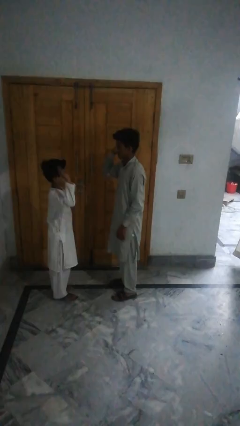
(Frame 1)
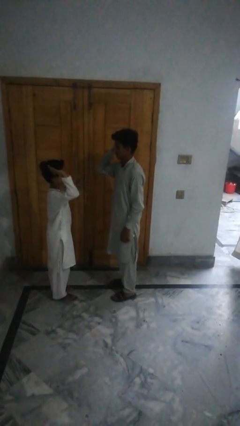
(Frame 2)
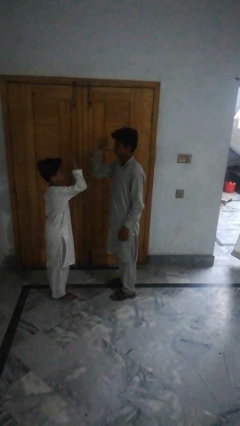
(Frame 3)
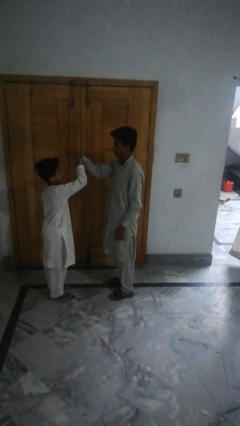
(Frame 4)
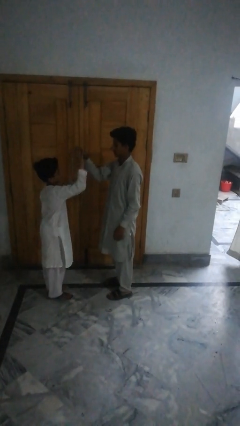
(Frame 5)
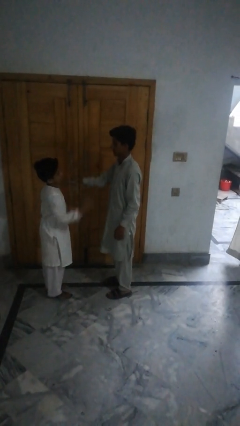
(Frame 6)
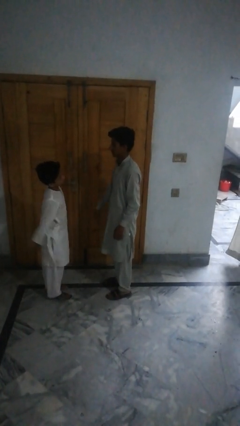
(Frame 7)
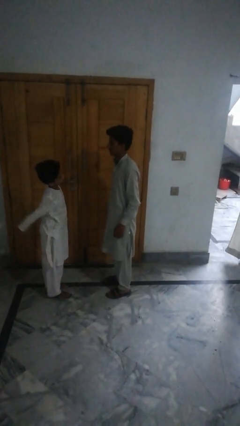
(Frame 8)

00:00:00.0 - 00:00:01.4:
person highfives hand

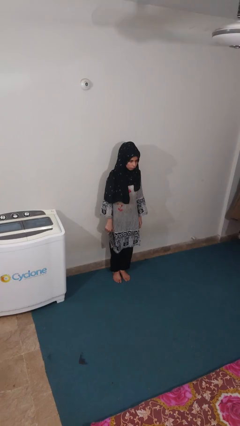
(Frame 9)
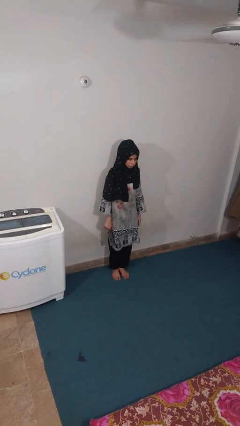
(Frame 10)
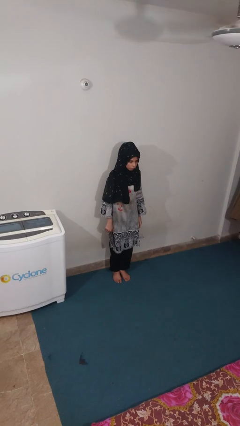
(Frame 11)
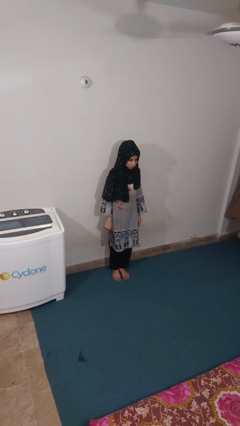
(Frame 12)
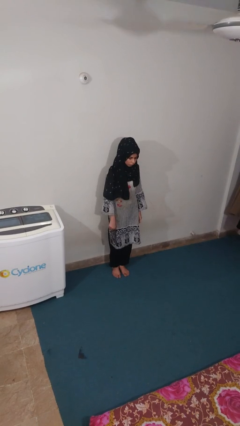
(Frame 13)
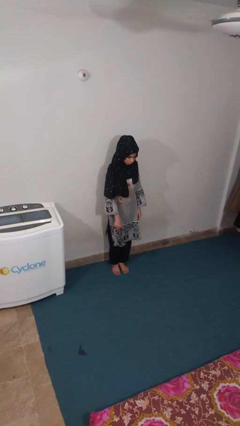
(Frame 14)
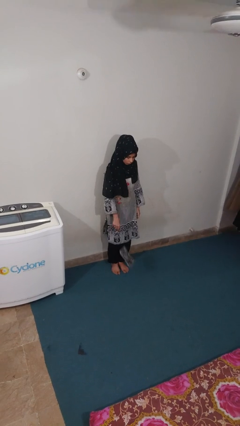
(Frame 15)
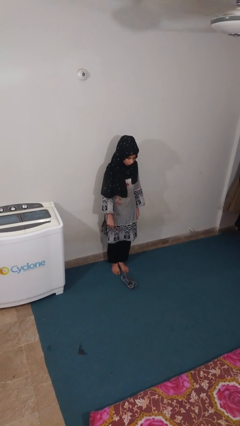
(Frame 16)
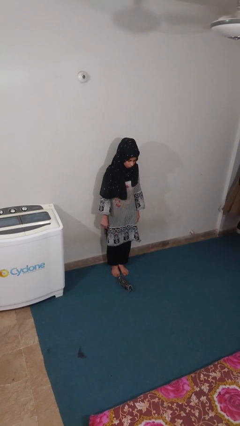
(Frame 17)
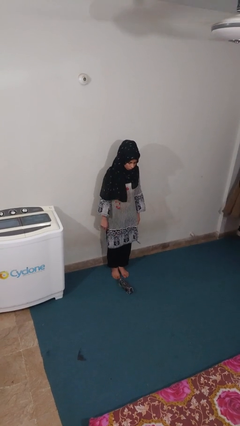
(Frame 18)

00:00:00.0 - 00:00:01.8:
person throws object to ground

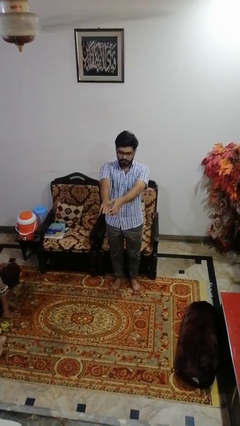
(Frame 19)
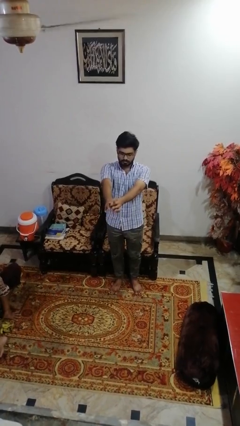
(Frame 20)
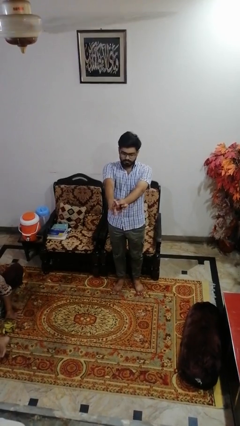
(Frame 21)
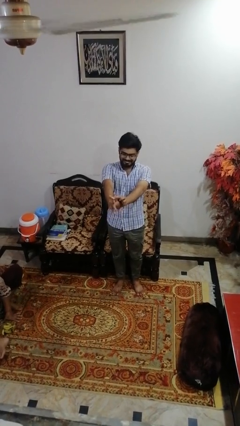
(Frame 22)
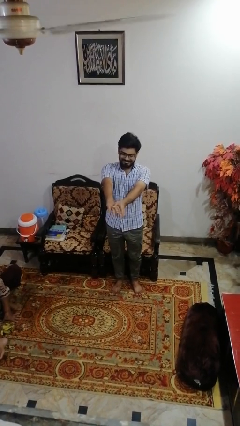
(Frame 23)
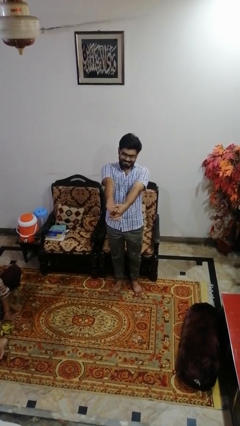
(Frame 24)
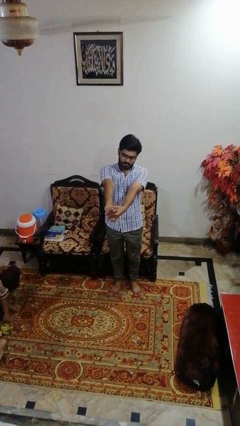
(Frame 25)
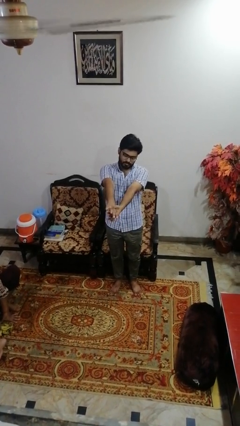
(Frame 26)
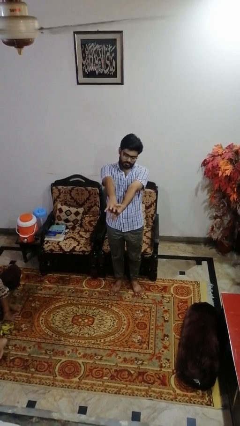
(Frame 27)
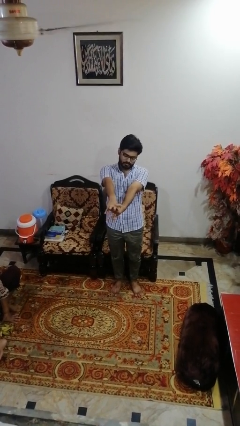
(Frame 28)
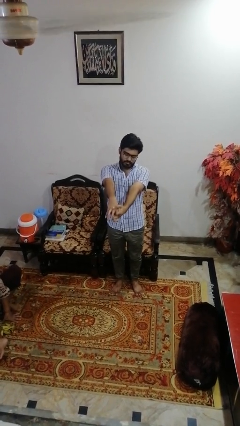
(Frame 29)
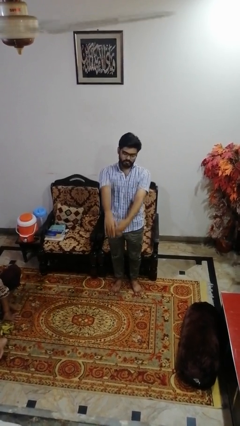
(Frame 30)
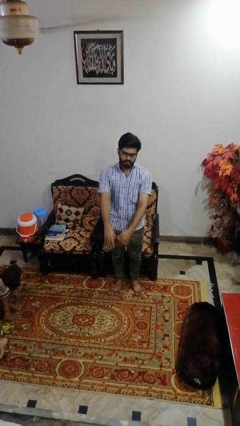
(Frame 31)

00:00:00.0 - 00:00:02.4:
person cracks knuckles

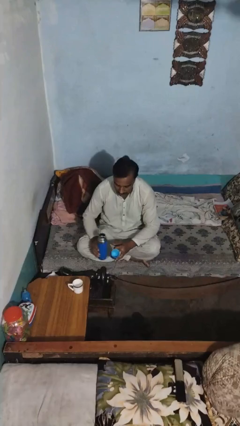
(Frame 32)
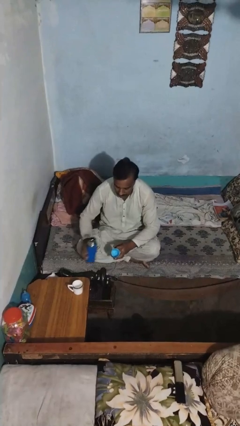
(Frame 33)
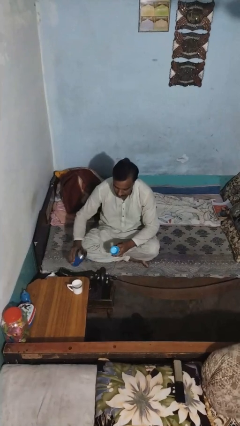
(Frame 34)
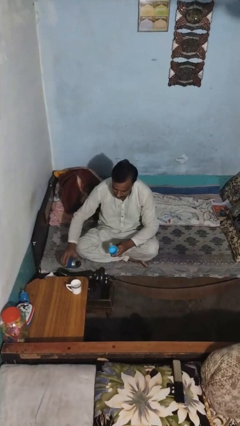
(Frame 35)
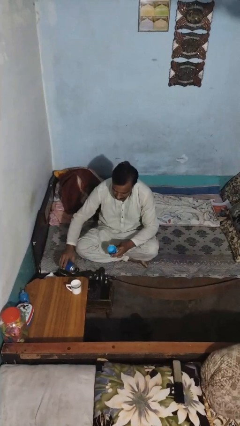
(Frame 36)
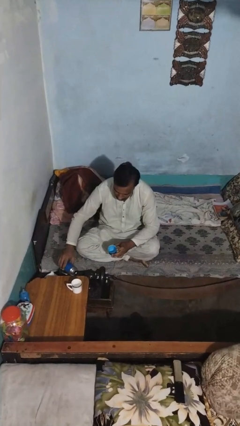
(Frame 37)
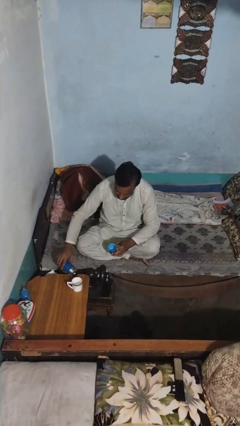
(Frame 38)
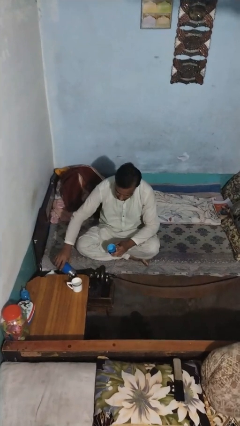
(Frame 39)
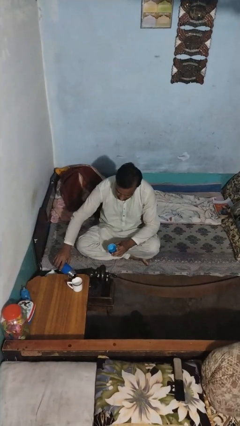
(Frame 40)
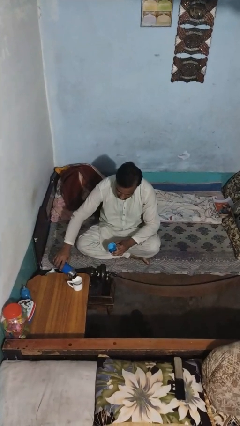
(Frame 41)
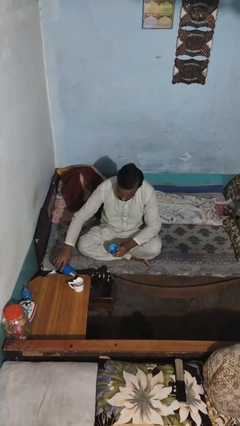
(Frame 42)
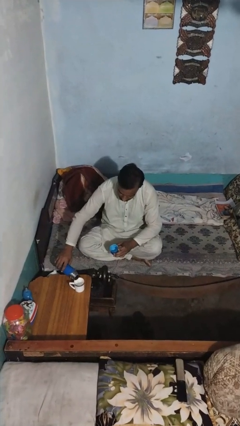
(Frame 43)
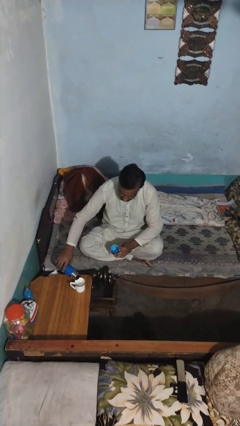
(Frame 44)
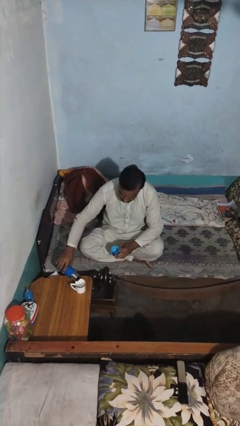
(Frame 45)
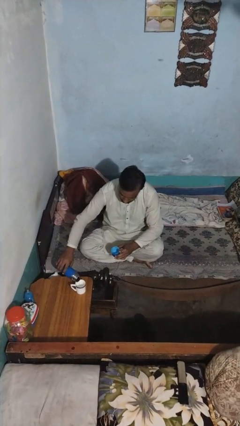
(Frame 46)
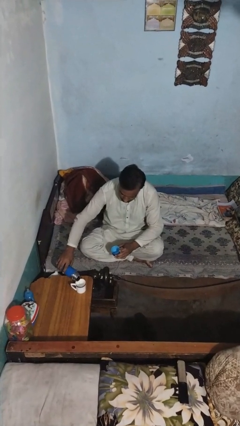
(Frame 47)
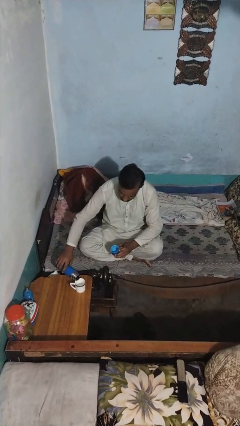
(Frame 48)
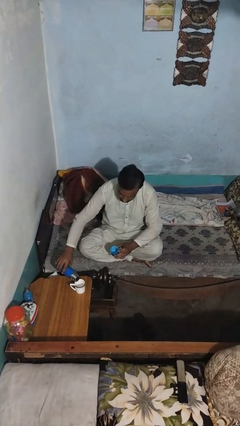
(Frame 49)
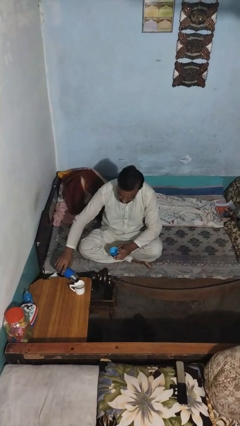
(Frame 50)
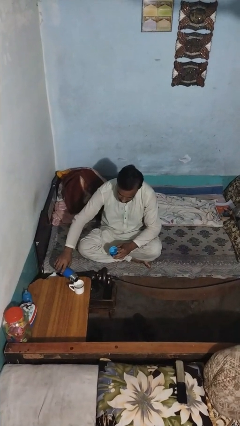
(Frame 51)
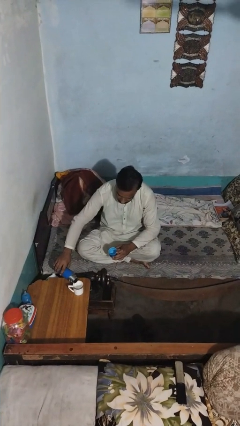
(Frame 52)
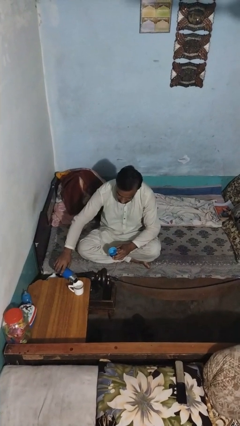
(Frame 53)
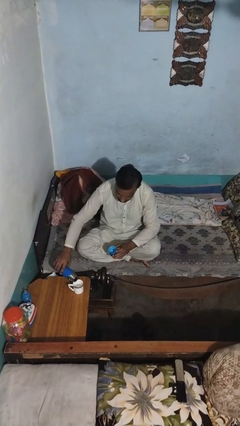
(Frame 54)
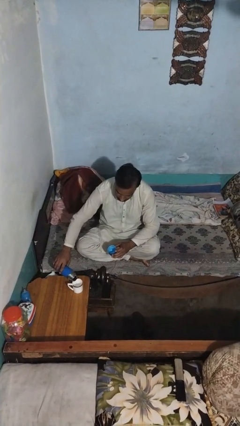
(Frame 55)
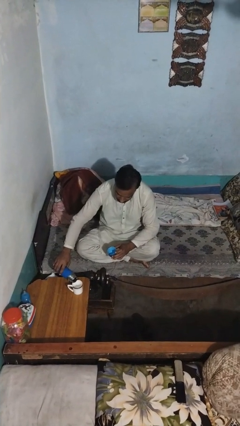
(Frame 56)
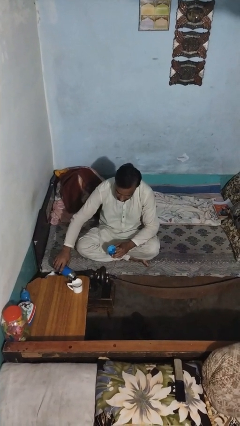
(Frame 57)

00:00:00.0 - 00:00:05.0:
person pours liquid into cup

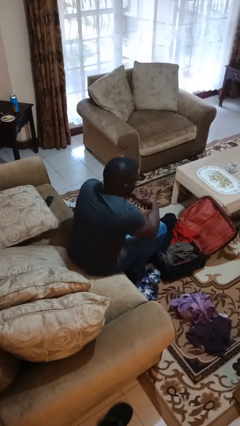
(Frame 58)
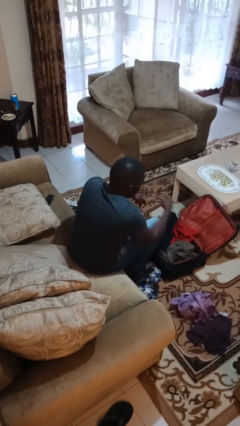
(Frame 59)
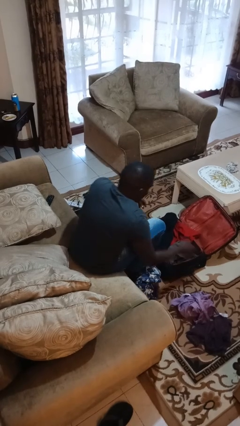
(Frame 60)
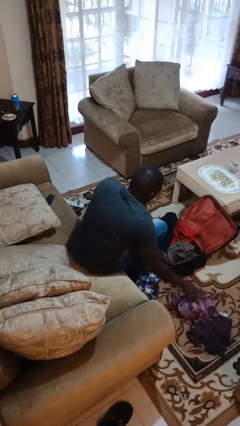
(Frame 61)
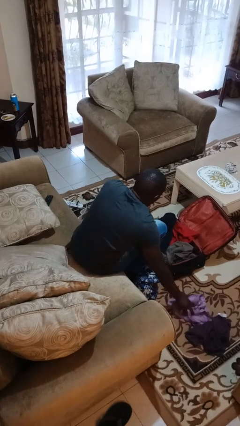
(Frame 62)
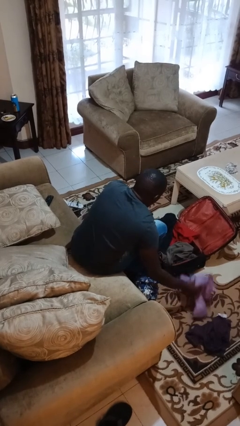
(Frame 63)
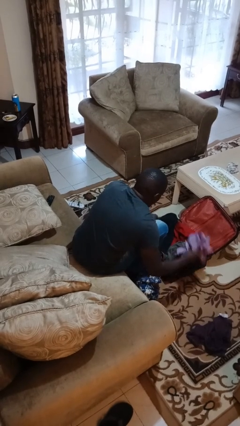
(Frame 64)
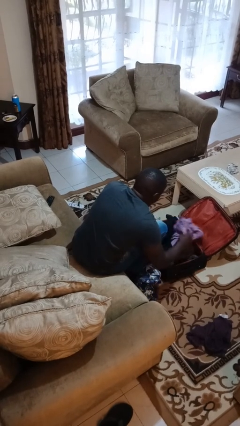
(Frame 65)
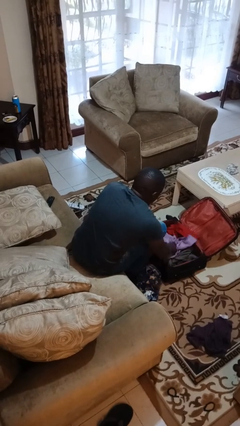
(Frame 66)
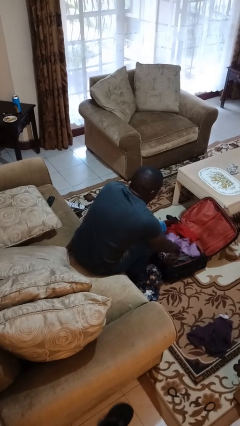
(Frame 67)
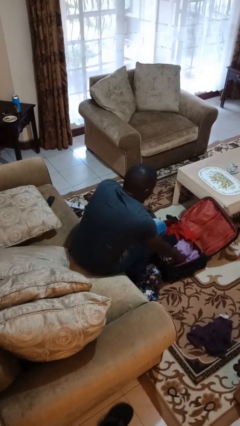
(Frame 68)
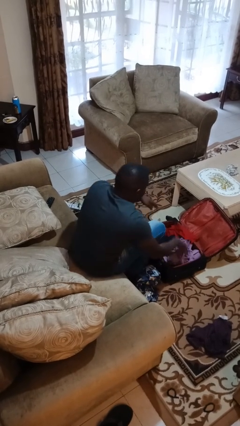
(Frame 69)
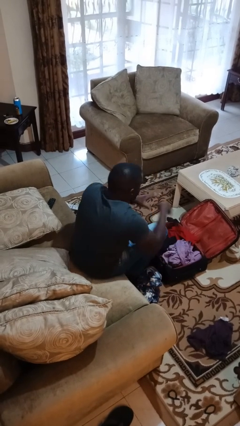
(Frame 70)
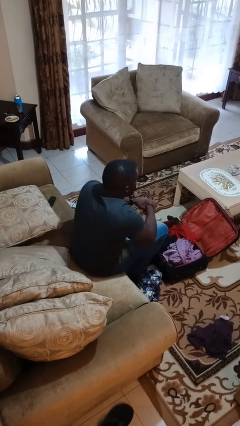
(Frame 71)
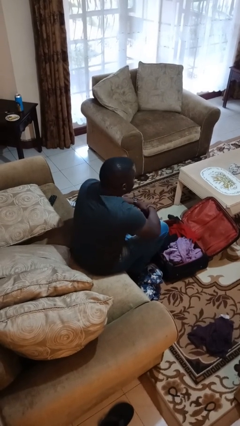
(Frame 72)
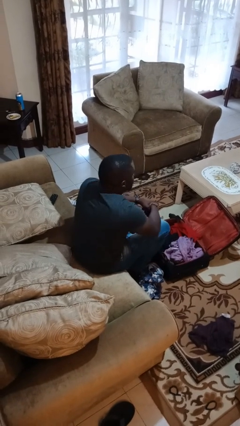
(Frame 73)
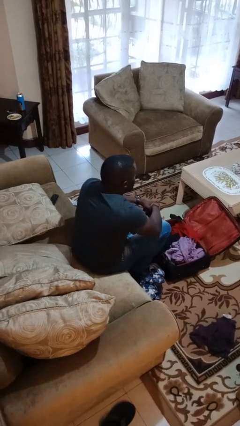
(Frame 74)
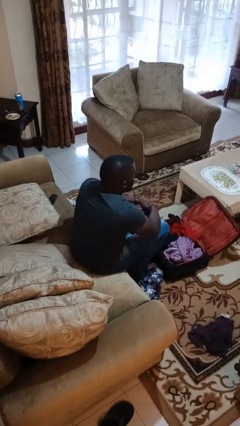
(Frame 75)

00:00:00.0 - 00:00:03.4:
person loads clothes into suitcase

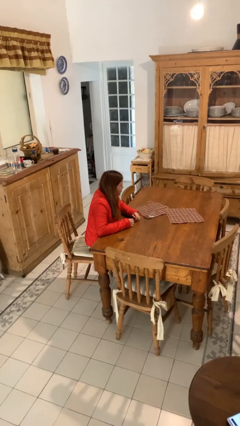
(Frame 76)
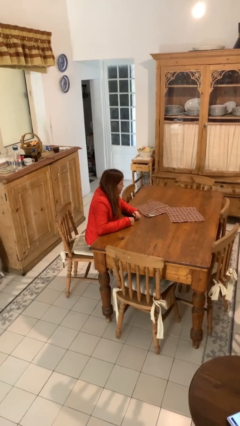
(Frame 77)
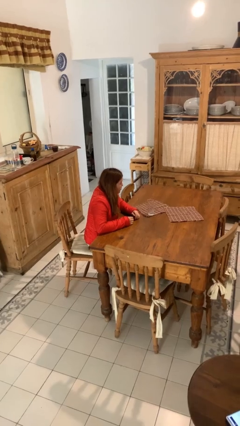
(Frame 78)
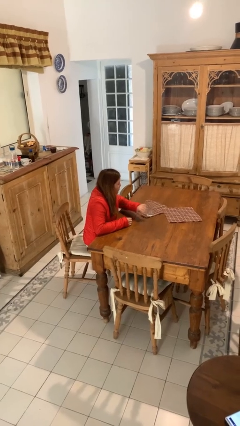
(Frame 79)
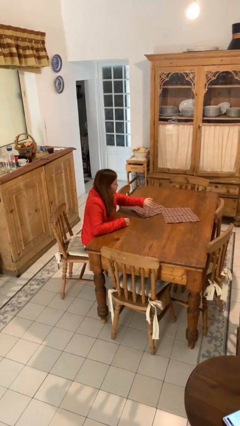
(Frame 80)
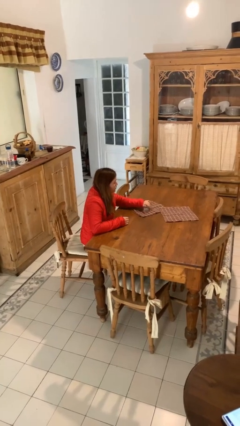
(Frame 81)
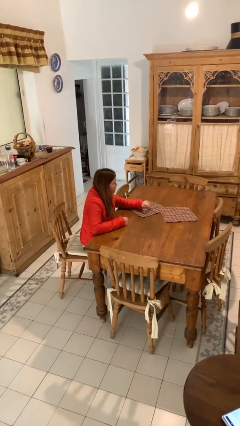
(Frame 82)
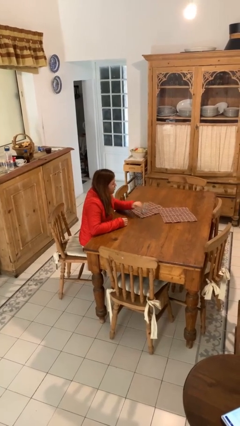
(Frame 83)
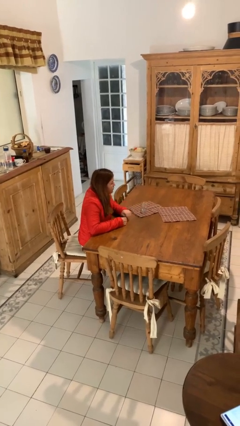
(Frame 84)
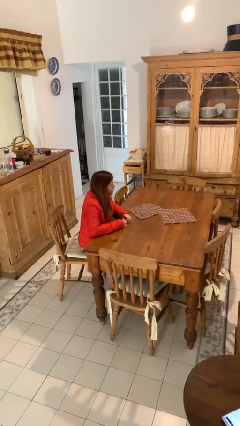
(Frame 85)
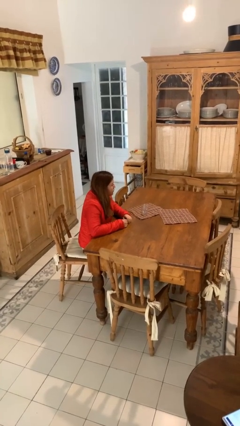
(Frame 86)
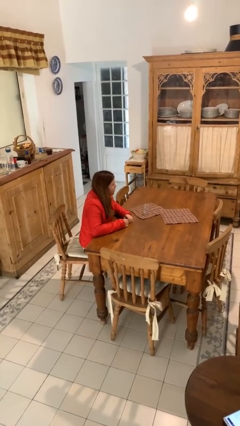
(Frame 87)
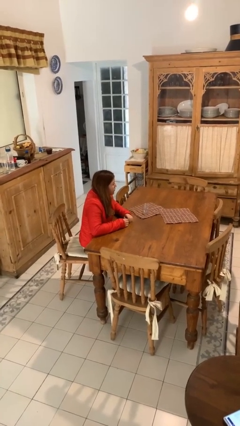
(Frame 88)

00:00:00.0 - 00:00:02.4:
person knocks over glass

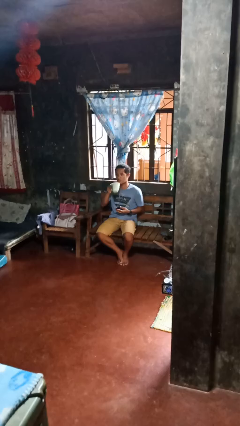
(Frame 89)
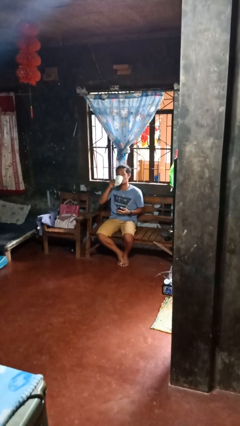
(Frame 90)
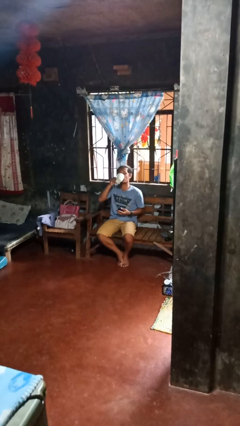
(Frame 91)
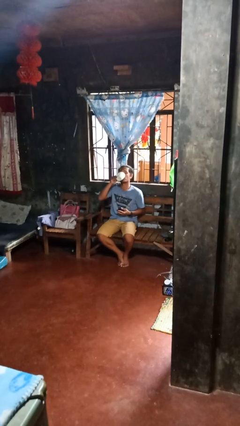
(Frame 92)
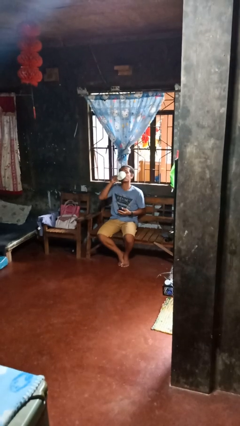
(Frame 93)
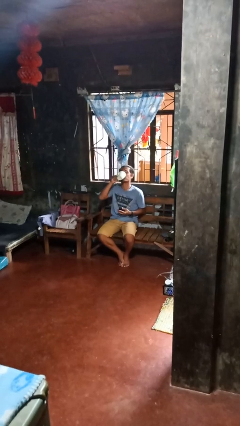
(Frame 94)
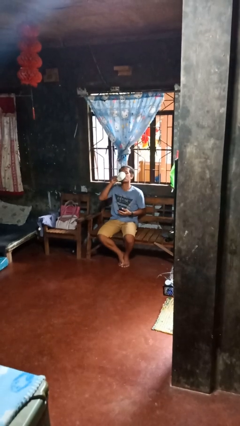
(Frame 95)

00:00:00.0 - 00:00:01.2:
person drinks from cup
